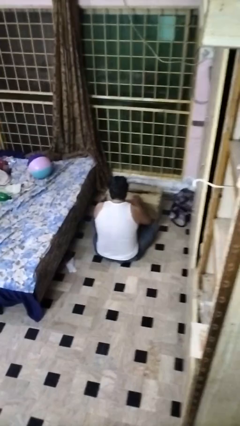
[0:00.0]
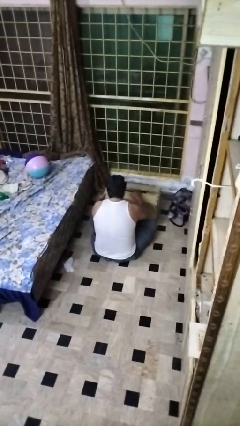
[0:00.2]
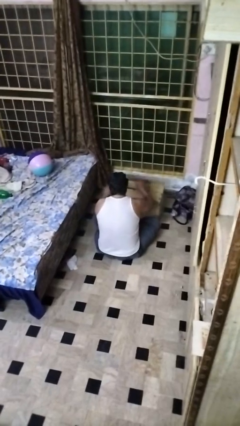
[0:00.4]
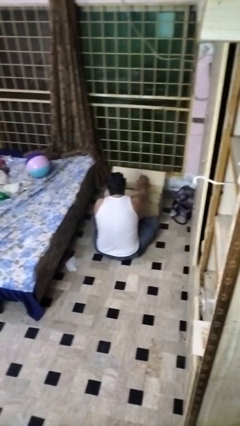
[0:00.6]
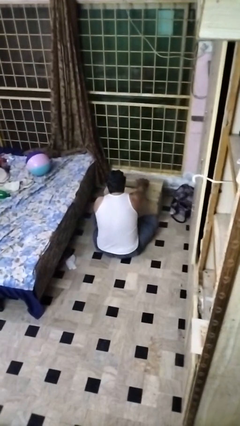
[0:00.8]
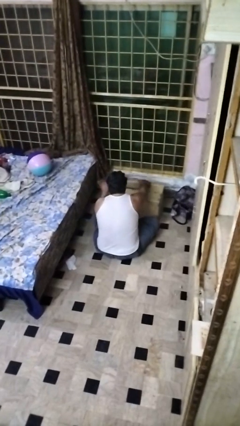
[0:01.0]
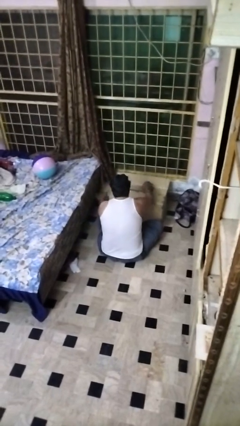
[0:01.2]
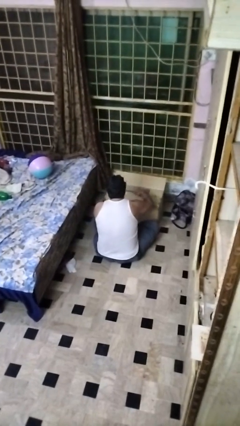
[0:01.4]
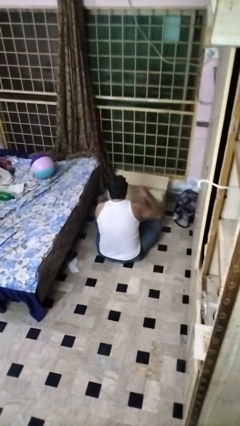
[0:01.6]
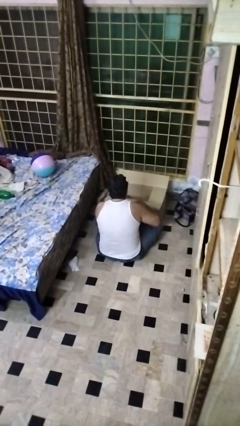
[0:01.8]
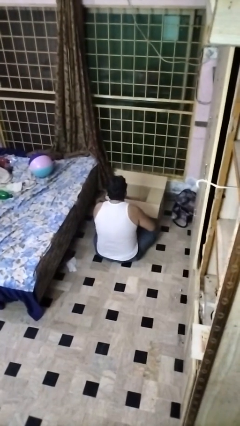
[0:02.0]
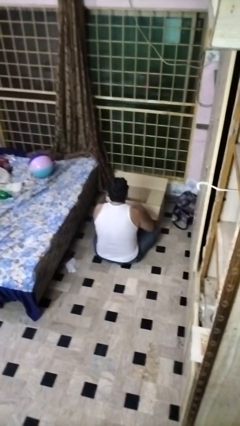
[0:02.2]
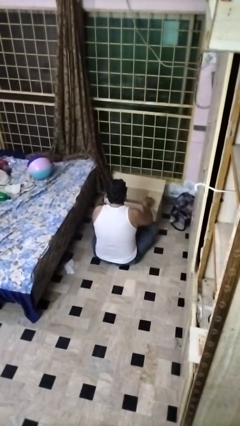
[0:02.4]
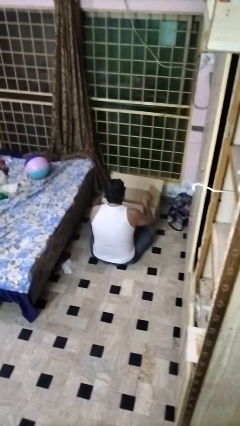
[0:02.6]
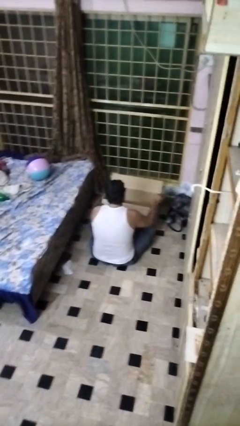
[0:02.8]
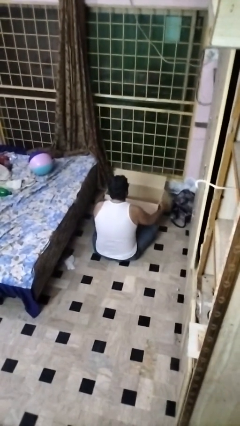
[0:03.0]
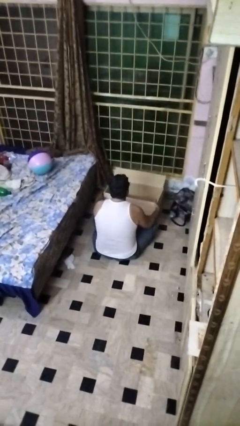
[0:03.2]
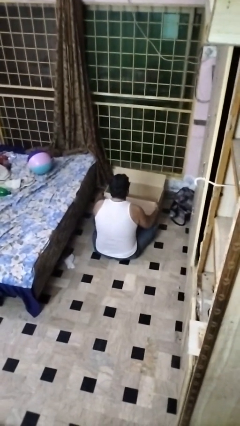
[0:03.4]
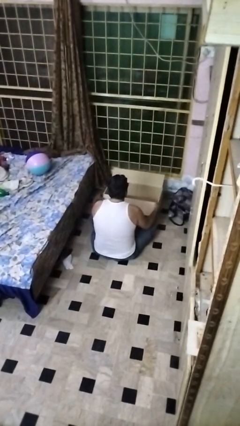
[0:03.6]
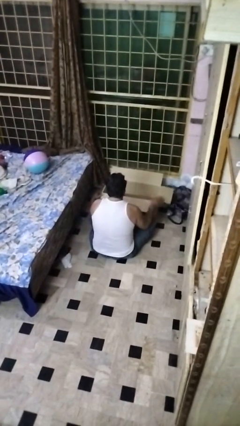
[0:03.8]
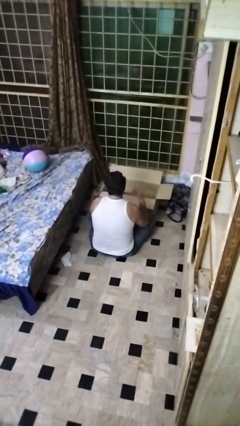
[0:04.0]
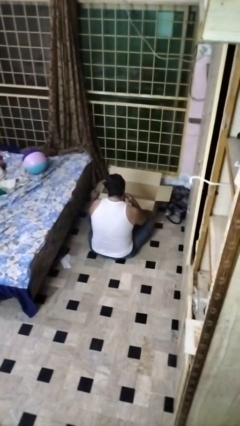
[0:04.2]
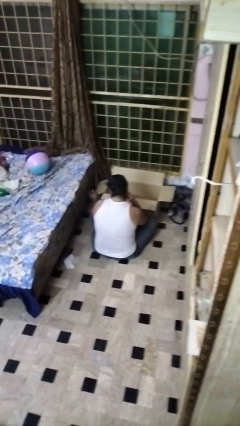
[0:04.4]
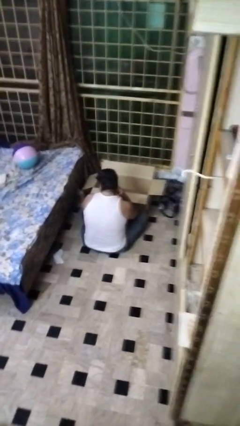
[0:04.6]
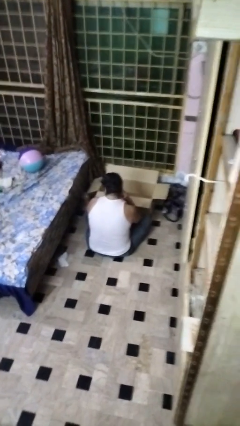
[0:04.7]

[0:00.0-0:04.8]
person opens box

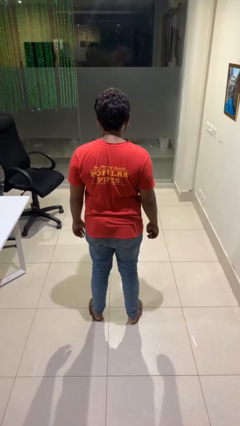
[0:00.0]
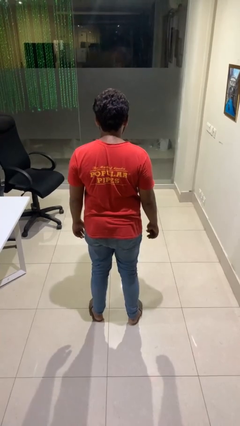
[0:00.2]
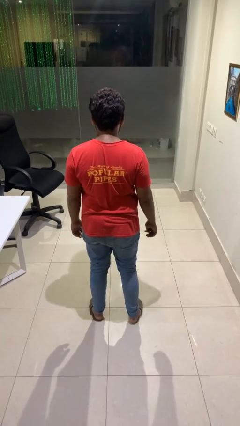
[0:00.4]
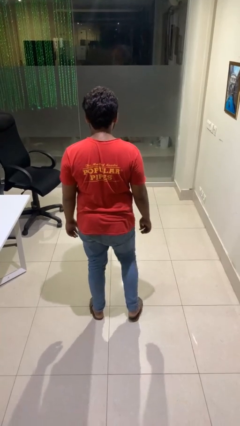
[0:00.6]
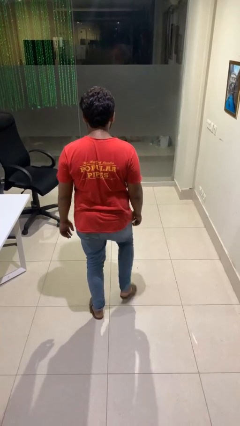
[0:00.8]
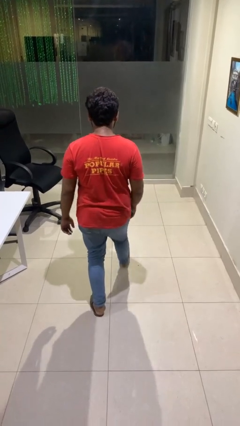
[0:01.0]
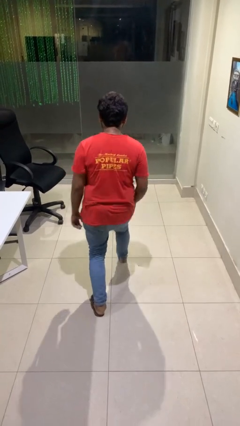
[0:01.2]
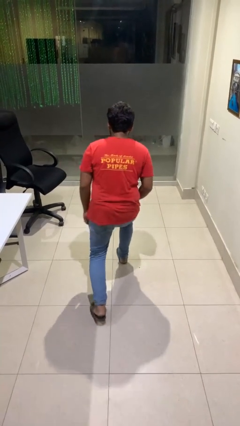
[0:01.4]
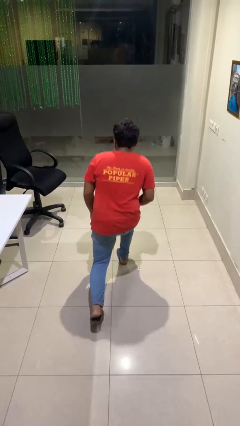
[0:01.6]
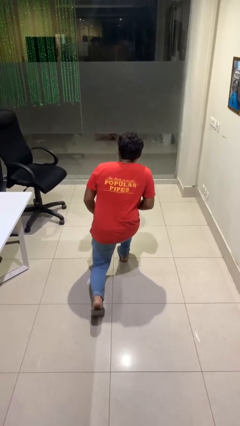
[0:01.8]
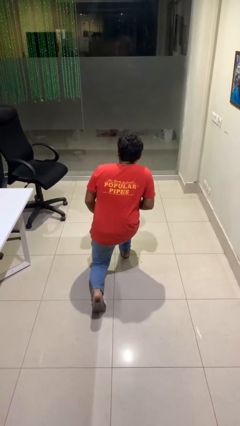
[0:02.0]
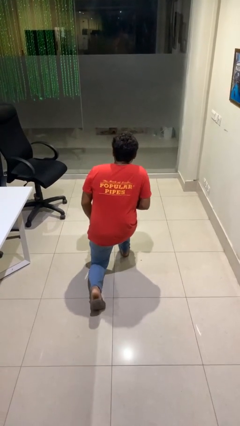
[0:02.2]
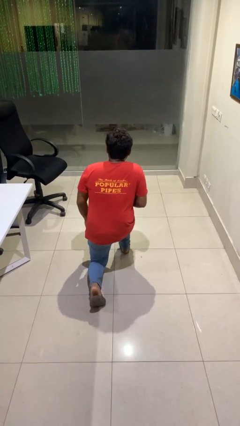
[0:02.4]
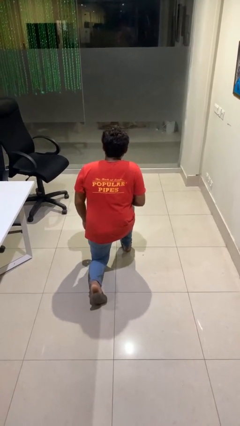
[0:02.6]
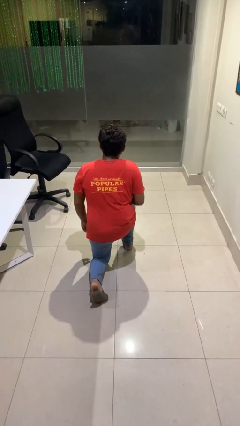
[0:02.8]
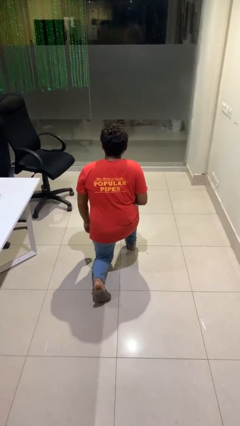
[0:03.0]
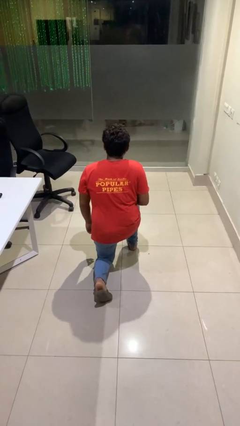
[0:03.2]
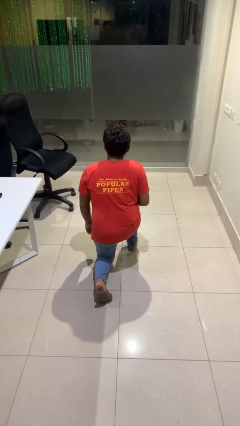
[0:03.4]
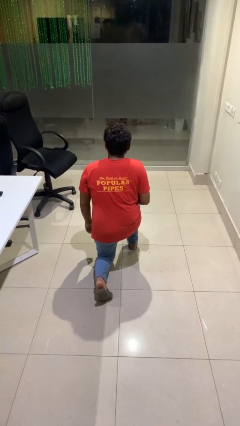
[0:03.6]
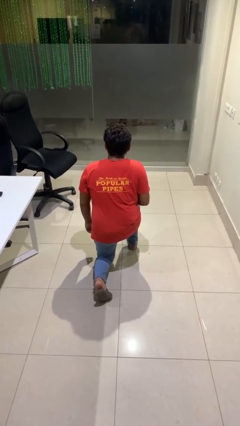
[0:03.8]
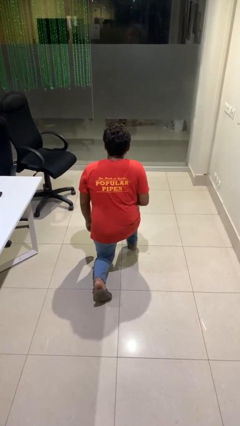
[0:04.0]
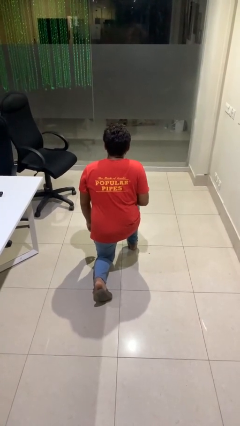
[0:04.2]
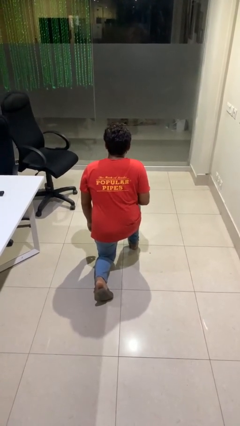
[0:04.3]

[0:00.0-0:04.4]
person kneels

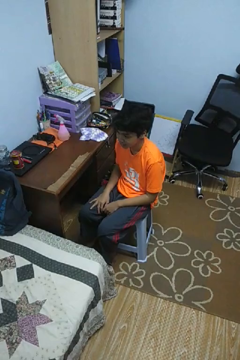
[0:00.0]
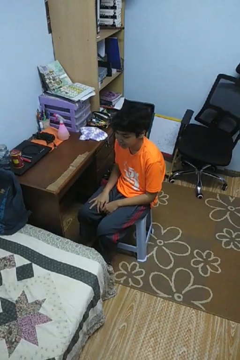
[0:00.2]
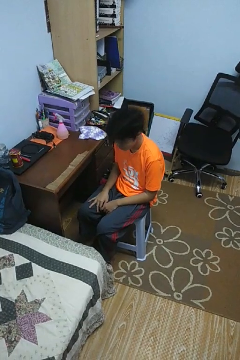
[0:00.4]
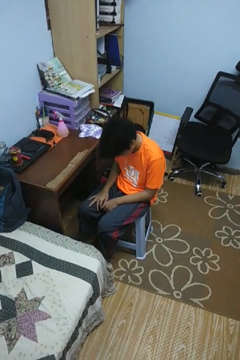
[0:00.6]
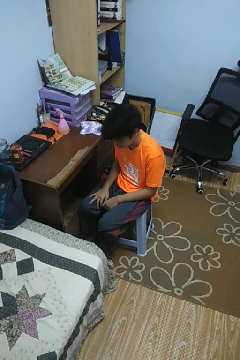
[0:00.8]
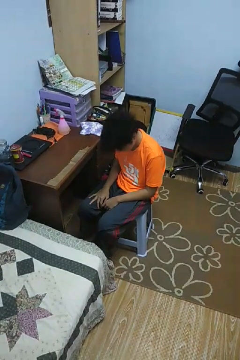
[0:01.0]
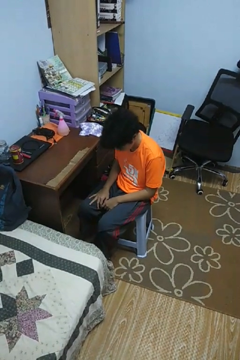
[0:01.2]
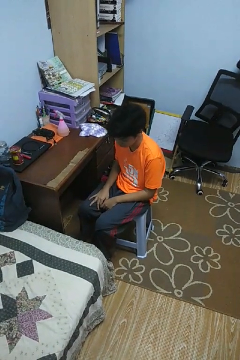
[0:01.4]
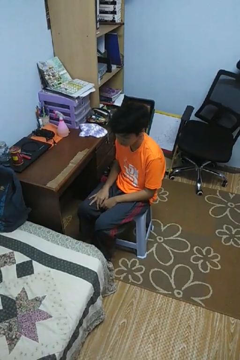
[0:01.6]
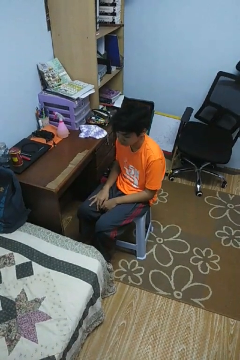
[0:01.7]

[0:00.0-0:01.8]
person nods head

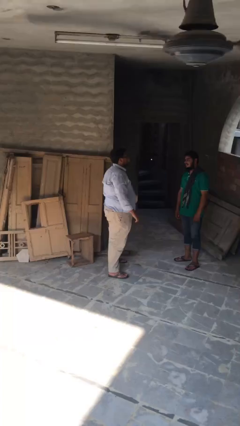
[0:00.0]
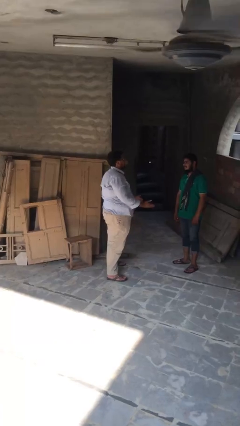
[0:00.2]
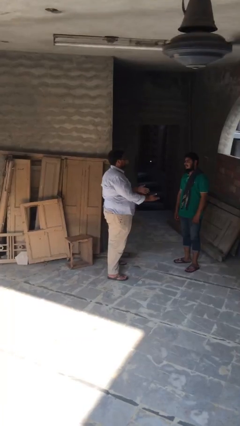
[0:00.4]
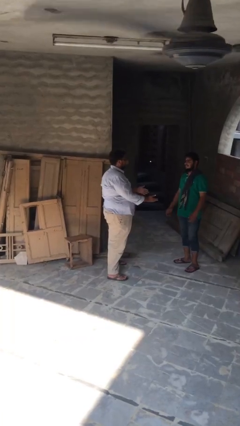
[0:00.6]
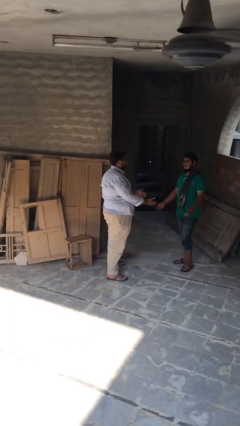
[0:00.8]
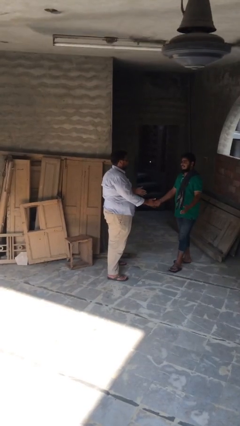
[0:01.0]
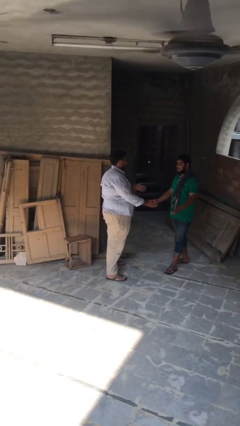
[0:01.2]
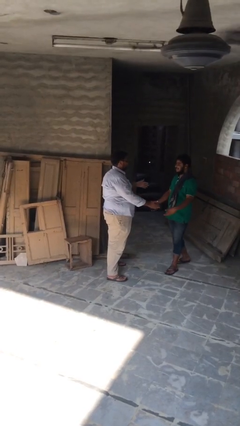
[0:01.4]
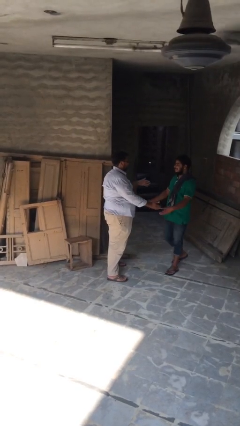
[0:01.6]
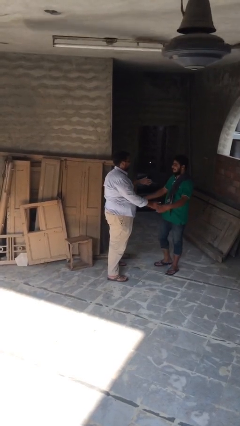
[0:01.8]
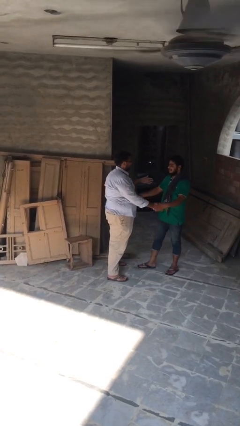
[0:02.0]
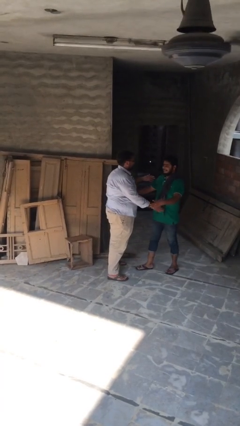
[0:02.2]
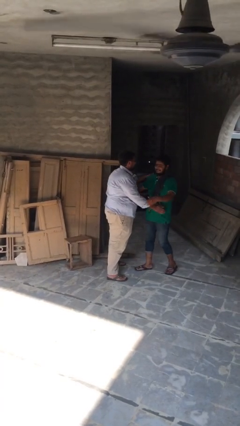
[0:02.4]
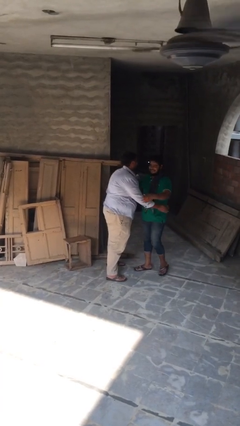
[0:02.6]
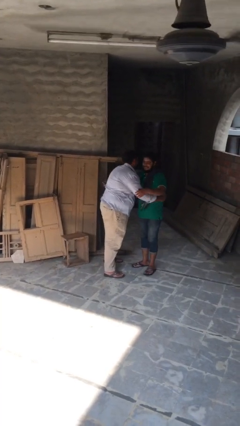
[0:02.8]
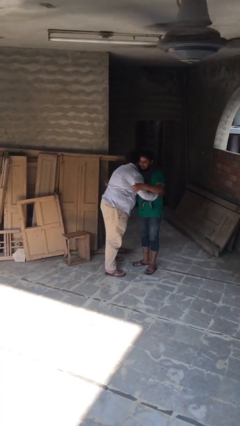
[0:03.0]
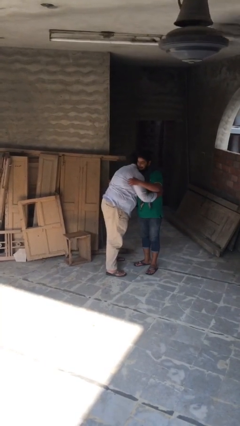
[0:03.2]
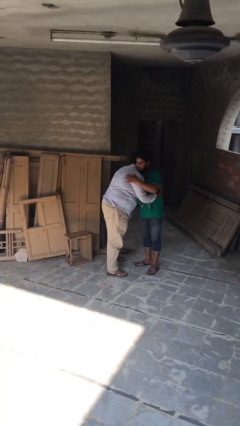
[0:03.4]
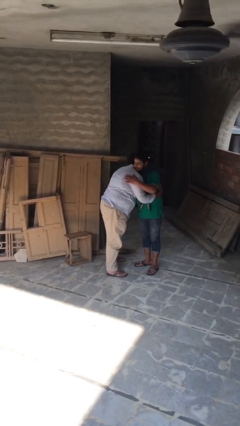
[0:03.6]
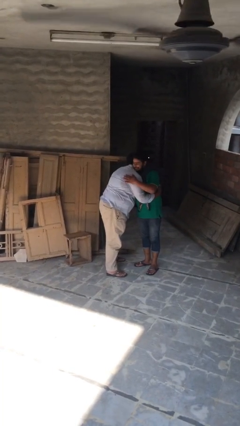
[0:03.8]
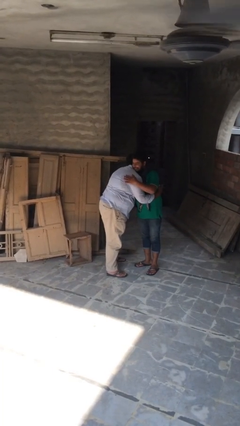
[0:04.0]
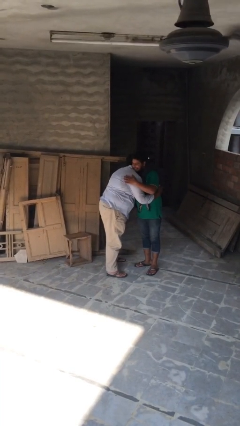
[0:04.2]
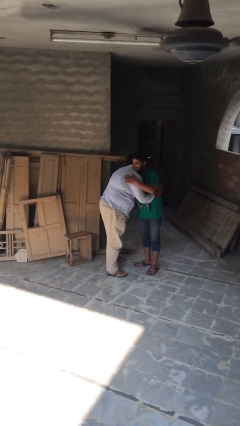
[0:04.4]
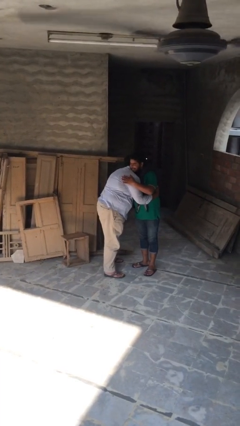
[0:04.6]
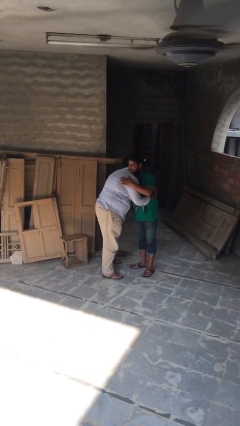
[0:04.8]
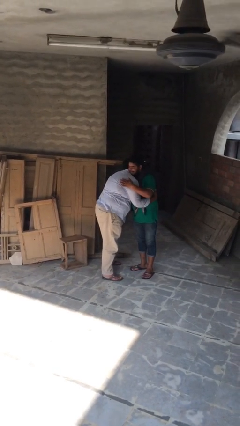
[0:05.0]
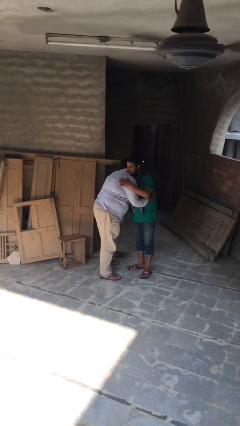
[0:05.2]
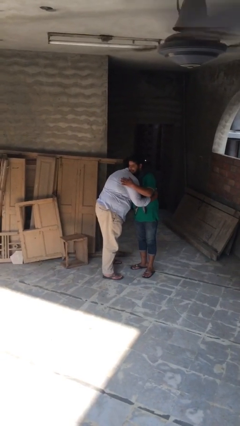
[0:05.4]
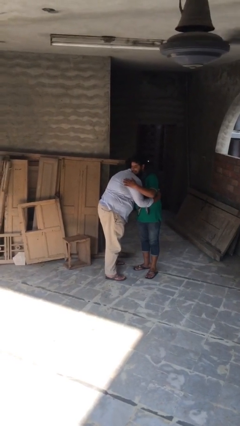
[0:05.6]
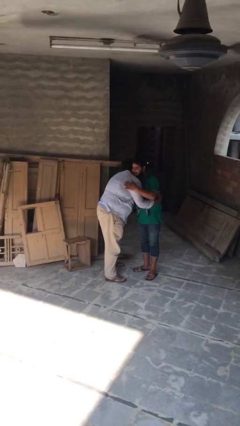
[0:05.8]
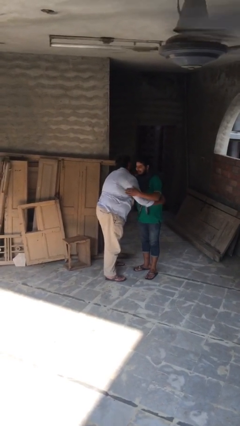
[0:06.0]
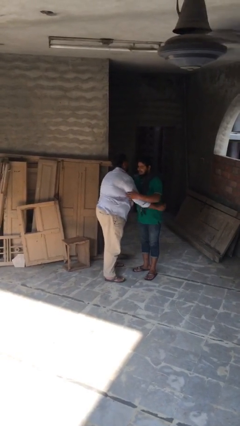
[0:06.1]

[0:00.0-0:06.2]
person embraces person

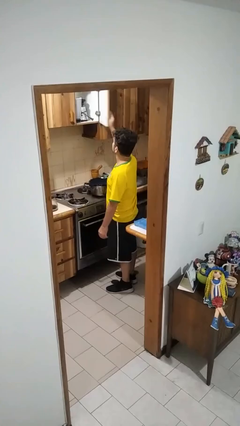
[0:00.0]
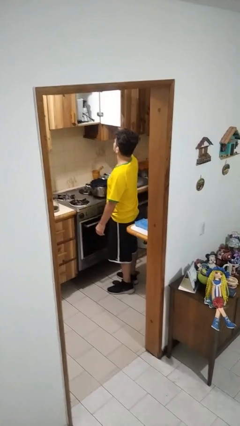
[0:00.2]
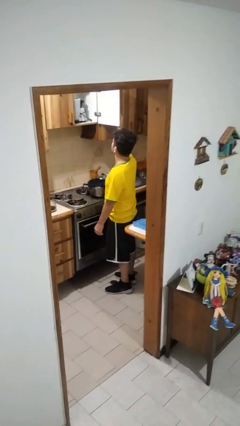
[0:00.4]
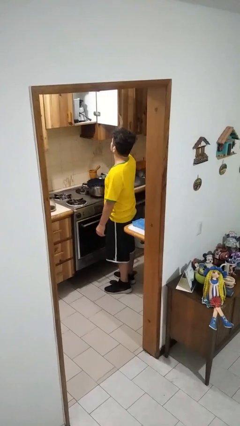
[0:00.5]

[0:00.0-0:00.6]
person opens cabinet

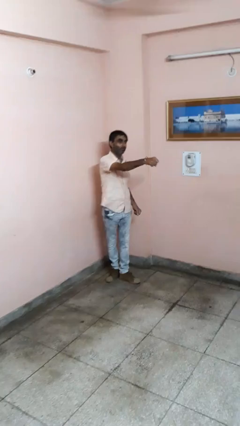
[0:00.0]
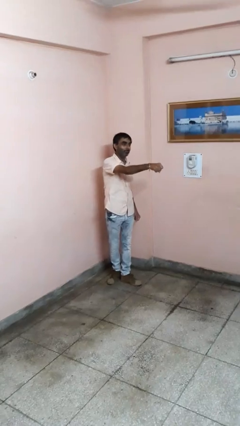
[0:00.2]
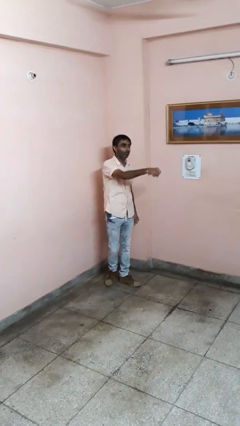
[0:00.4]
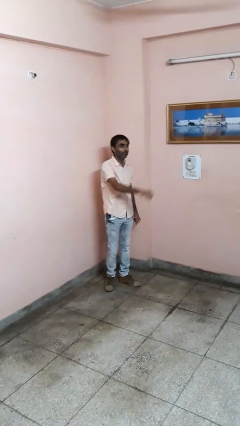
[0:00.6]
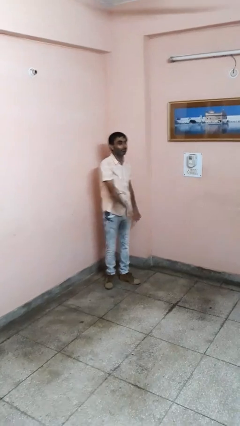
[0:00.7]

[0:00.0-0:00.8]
person punches
